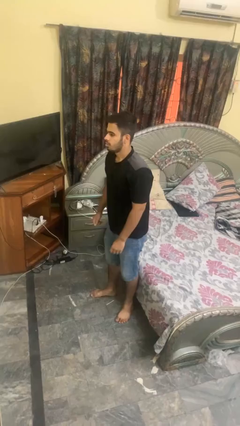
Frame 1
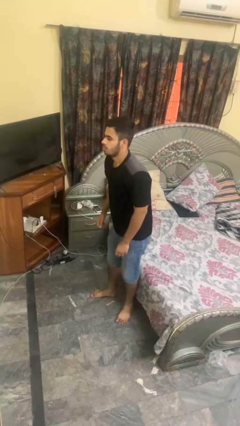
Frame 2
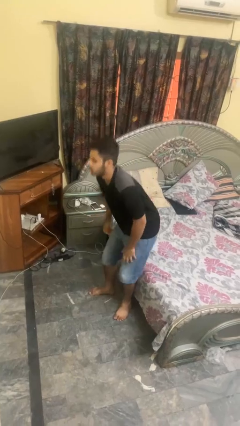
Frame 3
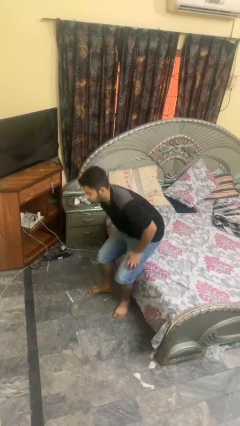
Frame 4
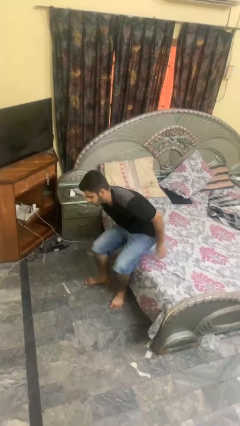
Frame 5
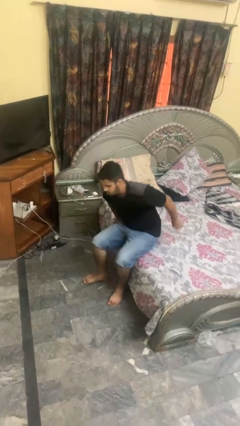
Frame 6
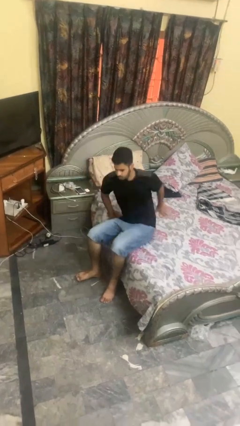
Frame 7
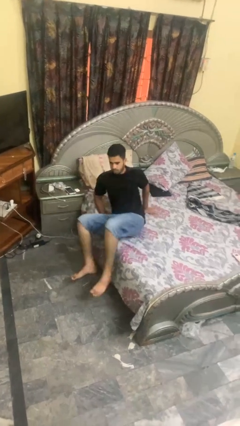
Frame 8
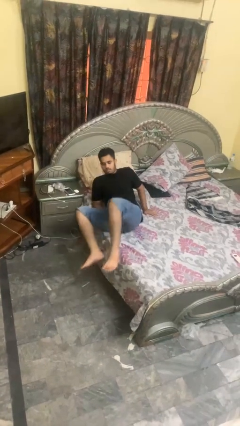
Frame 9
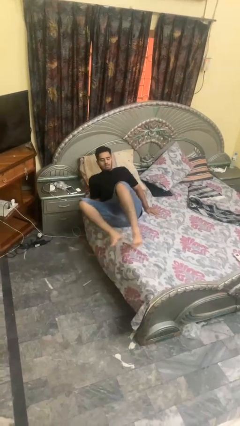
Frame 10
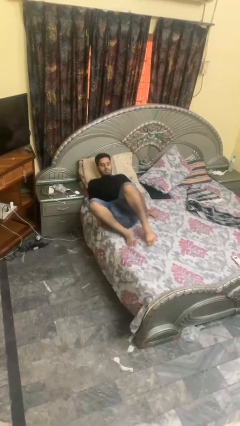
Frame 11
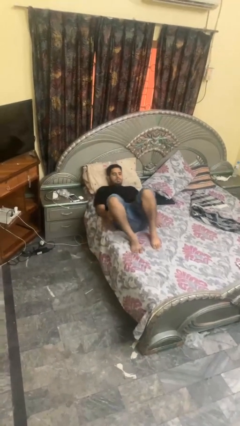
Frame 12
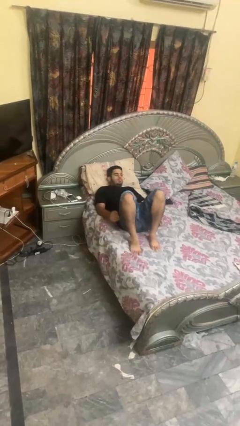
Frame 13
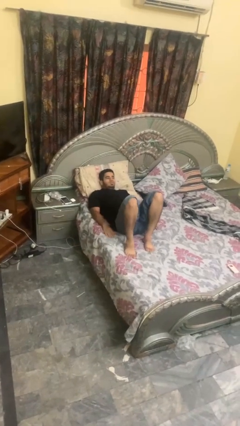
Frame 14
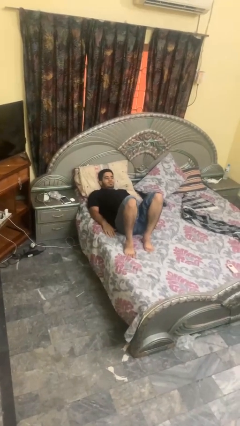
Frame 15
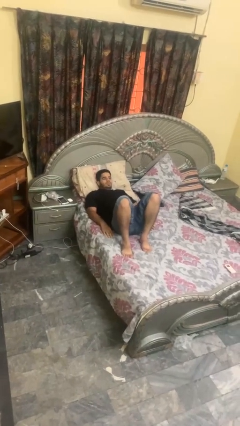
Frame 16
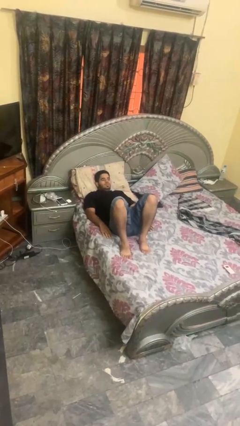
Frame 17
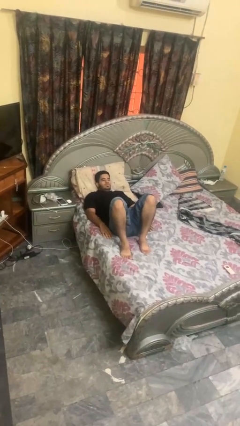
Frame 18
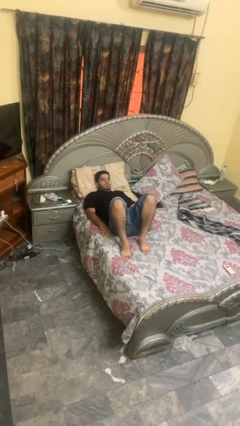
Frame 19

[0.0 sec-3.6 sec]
person lies down on bed

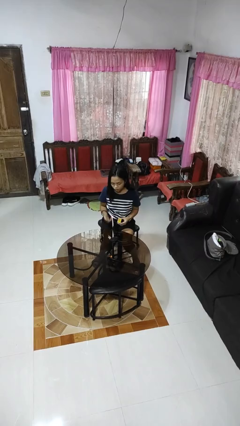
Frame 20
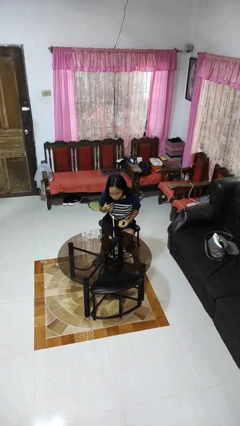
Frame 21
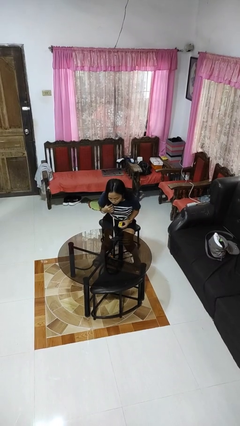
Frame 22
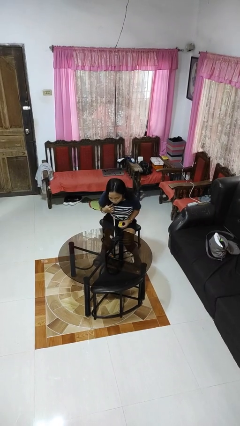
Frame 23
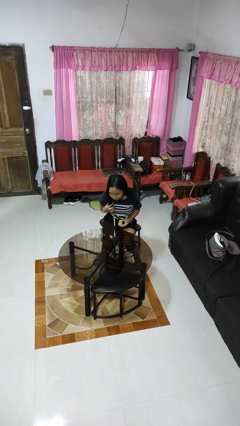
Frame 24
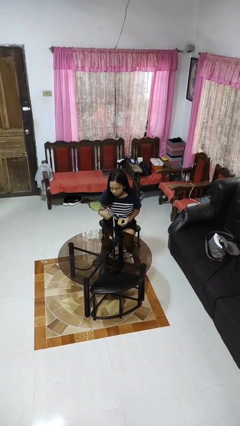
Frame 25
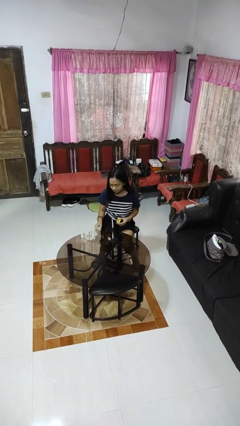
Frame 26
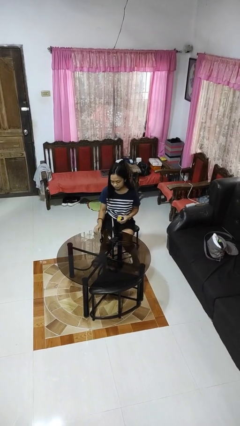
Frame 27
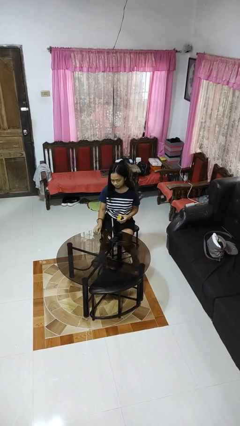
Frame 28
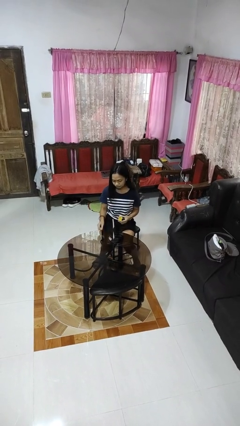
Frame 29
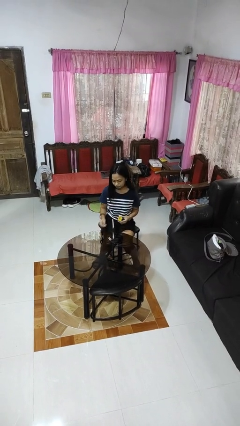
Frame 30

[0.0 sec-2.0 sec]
person extinguishes candle

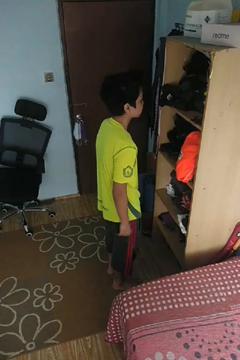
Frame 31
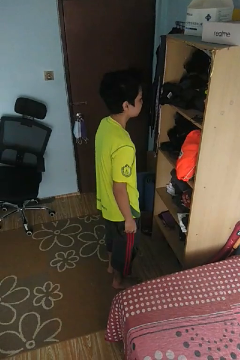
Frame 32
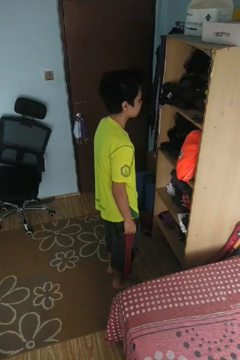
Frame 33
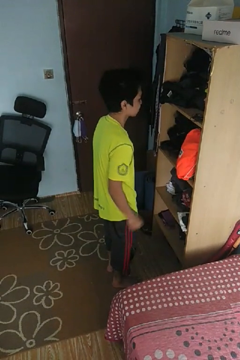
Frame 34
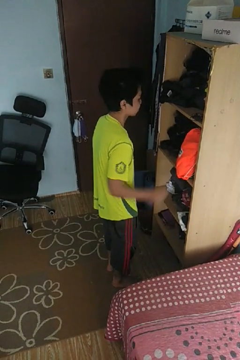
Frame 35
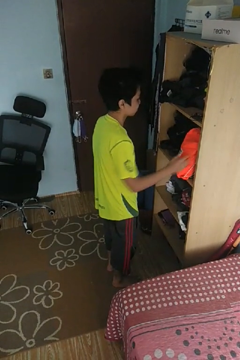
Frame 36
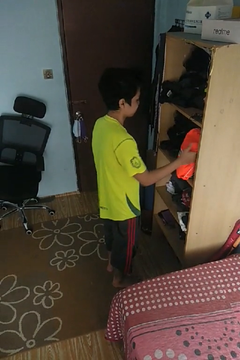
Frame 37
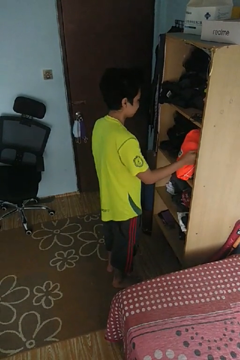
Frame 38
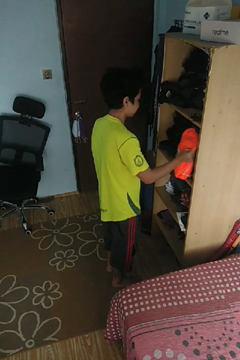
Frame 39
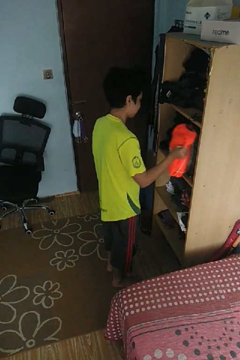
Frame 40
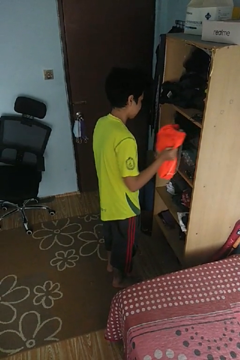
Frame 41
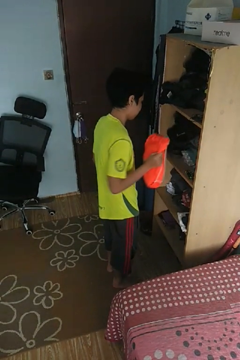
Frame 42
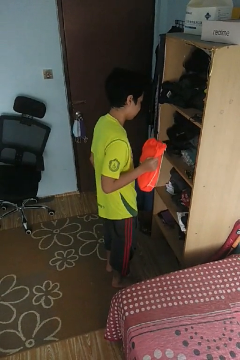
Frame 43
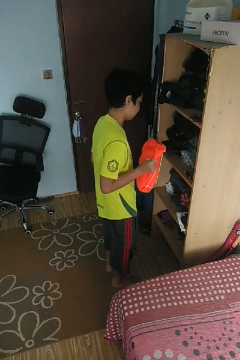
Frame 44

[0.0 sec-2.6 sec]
person picks up object from cabinet

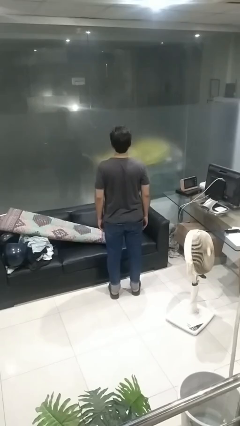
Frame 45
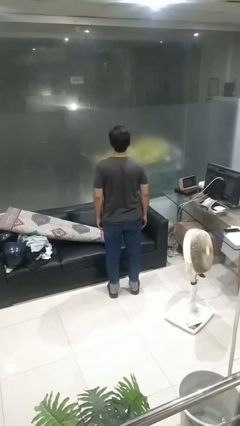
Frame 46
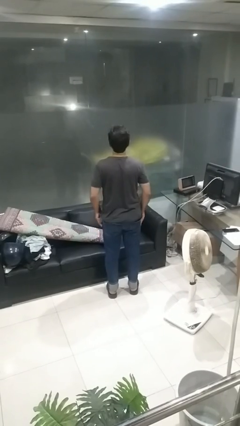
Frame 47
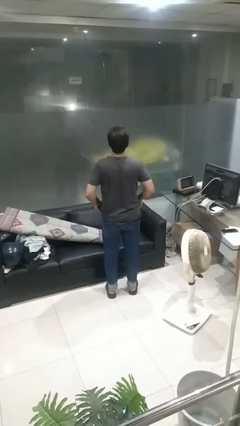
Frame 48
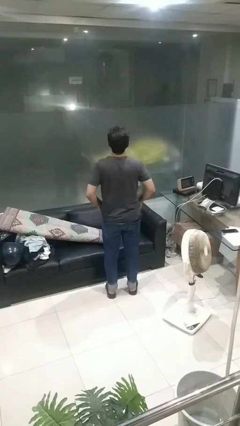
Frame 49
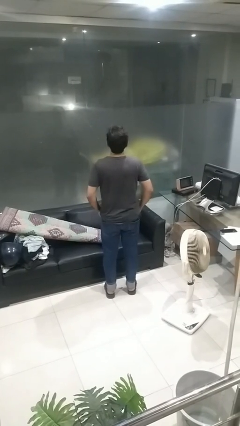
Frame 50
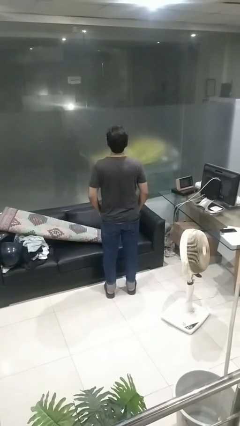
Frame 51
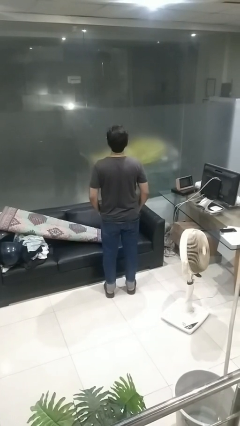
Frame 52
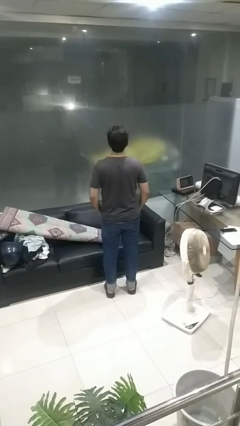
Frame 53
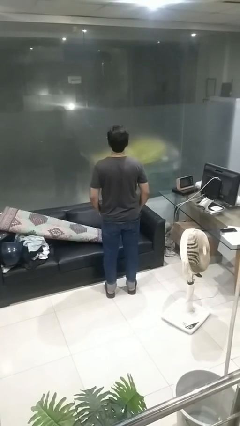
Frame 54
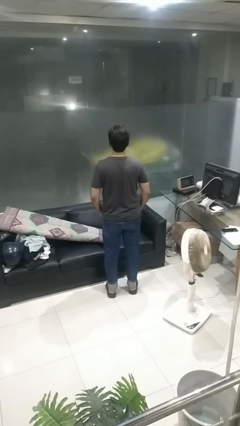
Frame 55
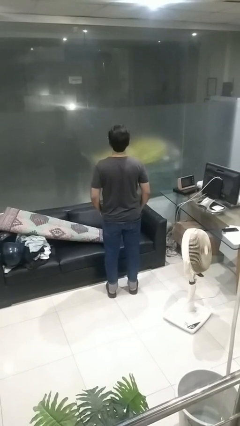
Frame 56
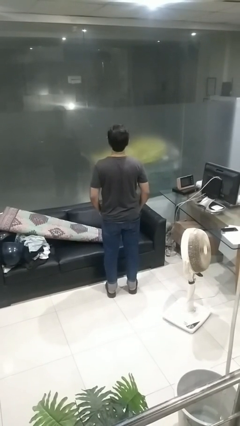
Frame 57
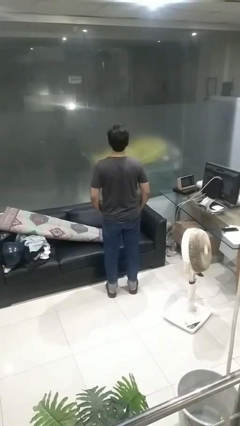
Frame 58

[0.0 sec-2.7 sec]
person puts hands in back pockets

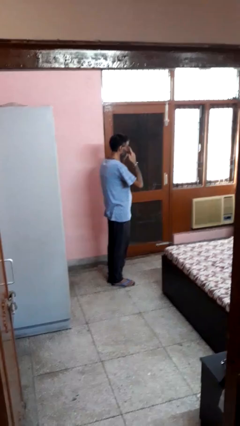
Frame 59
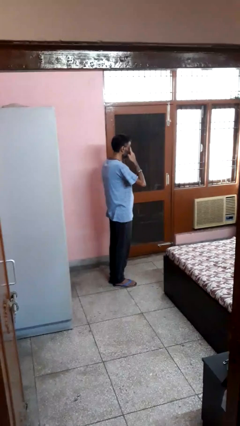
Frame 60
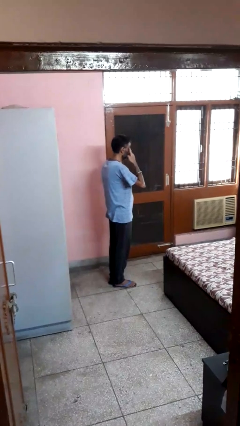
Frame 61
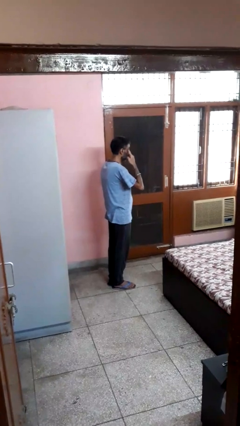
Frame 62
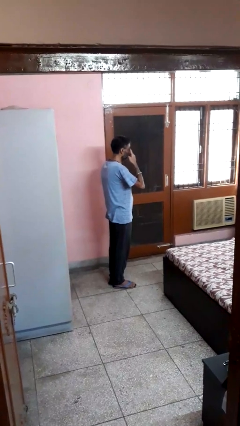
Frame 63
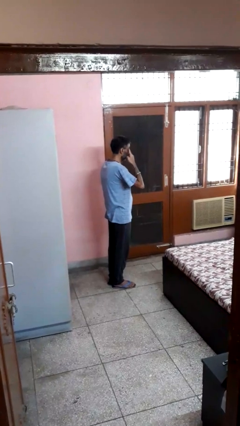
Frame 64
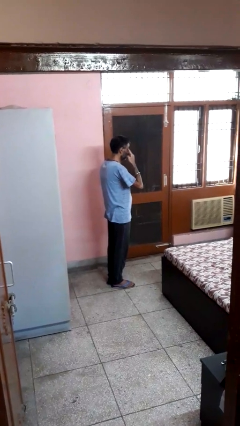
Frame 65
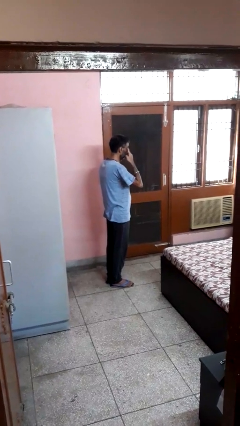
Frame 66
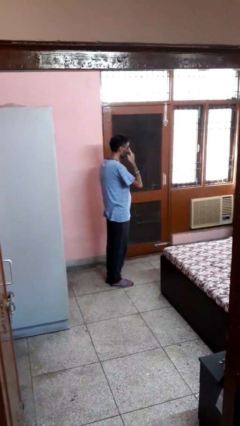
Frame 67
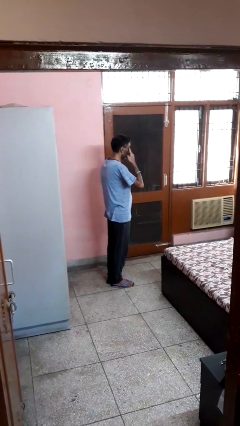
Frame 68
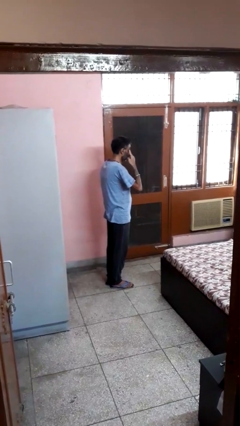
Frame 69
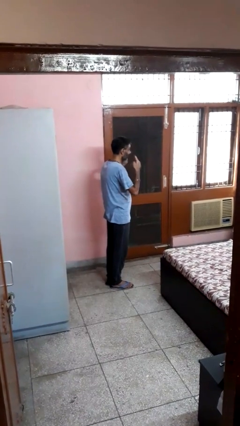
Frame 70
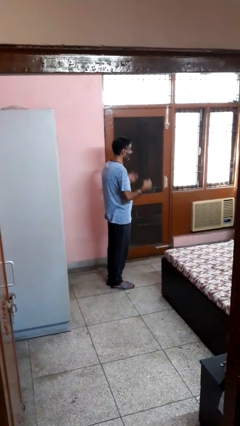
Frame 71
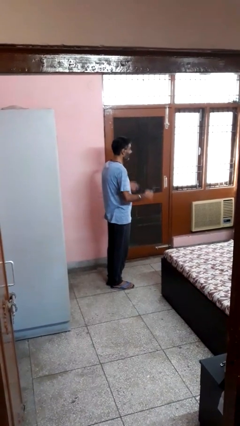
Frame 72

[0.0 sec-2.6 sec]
person rubs eyes

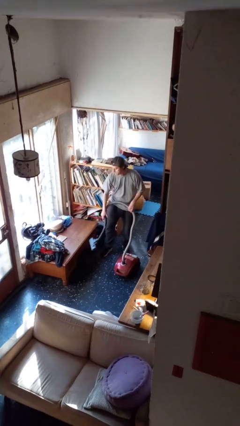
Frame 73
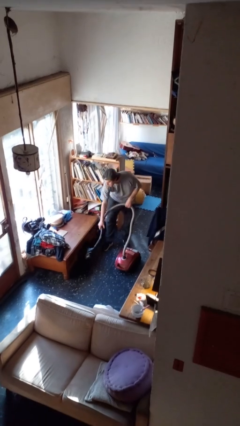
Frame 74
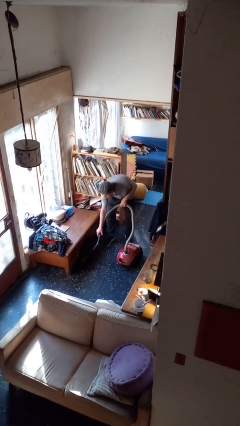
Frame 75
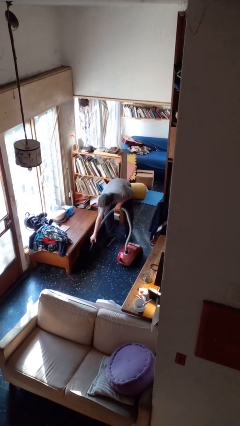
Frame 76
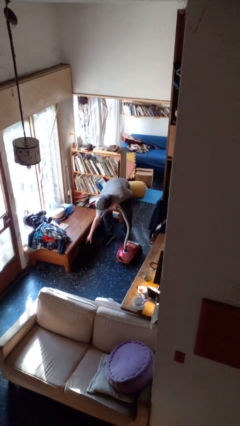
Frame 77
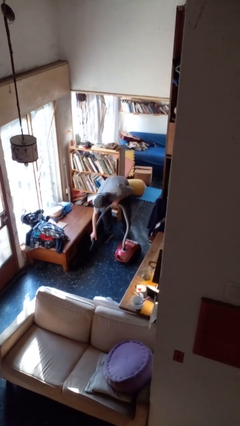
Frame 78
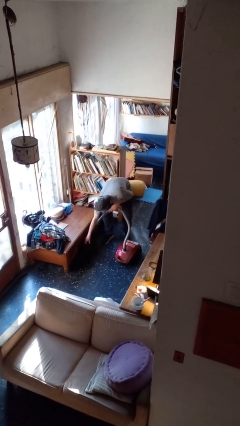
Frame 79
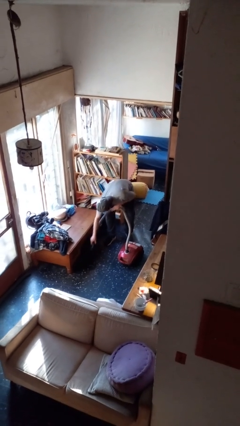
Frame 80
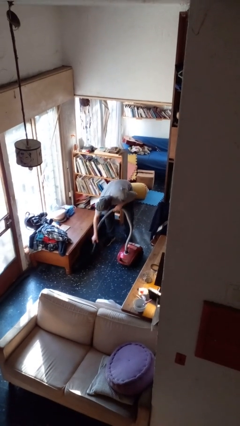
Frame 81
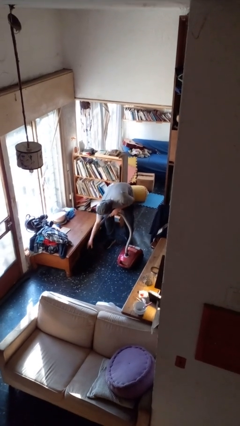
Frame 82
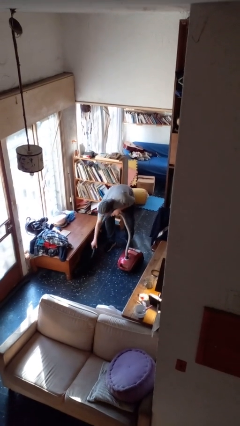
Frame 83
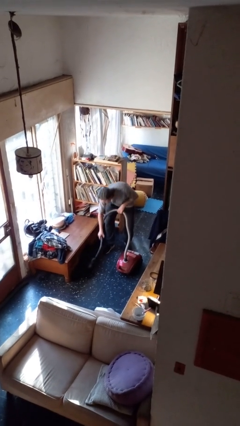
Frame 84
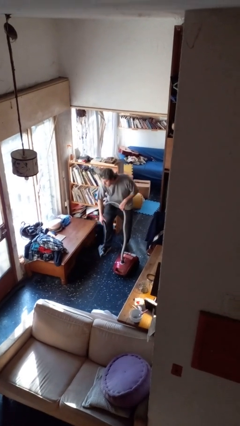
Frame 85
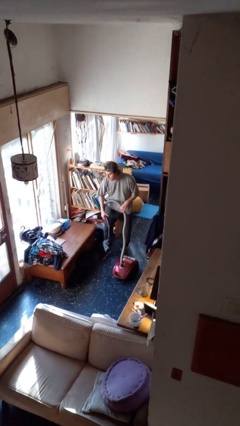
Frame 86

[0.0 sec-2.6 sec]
person vacuums carpet

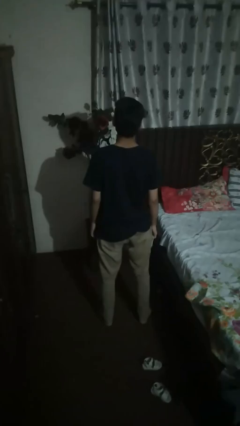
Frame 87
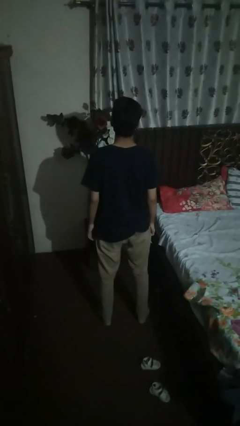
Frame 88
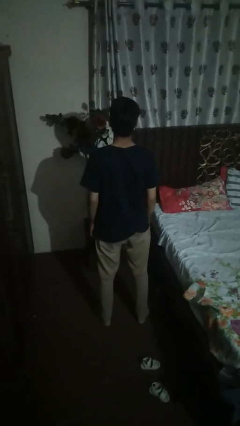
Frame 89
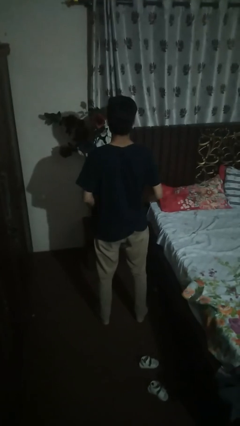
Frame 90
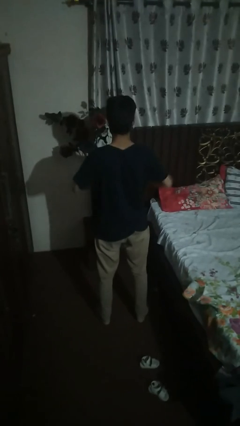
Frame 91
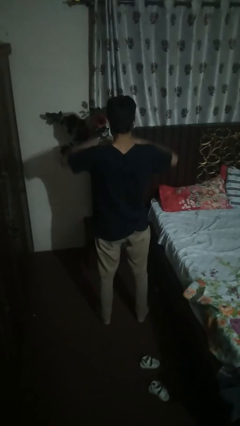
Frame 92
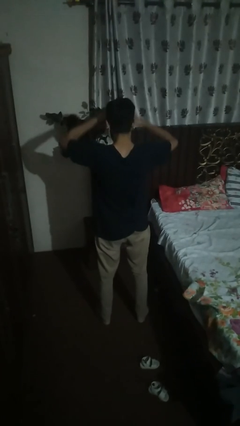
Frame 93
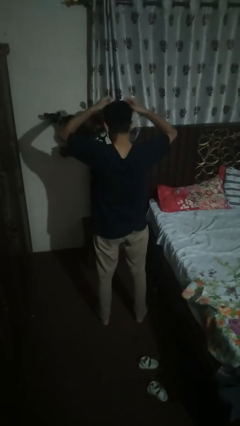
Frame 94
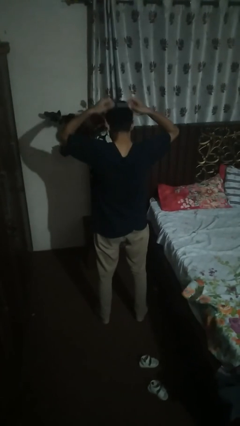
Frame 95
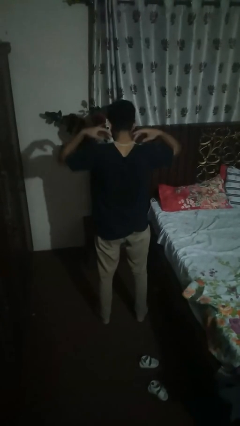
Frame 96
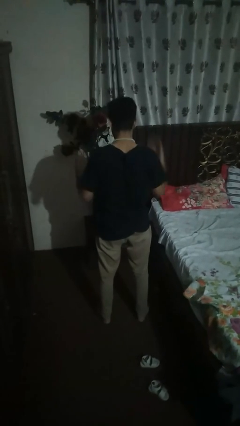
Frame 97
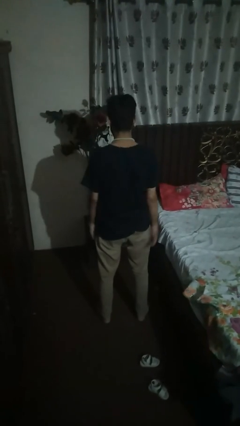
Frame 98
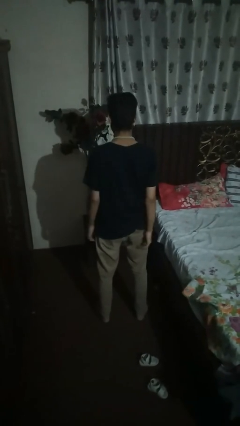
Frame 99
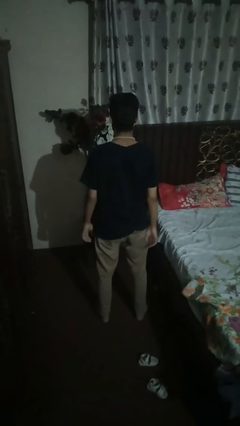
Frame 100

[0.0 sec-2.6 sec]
person puts on necklace
